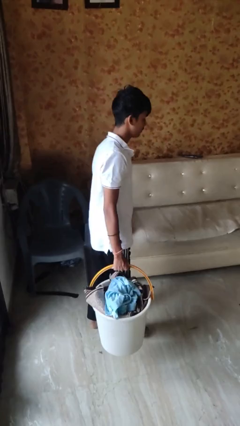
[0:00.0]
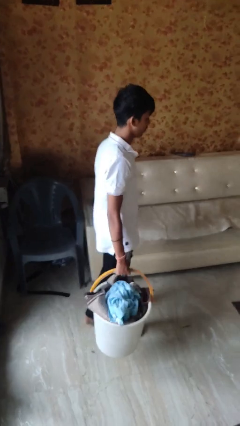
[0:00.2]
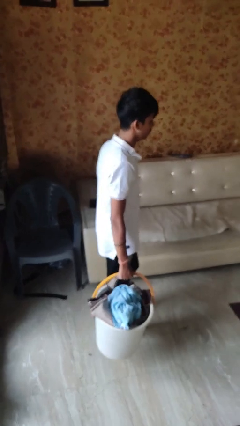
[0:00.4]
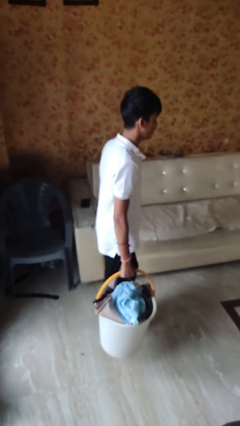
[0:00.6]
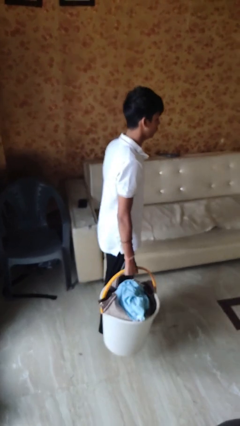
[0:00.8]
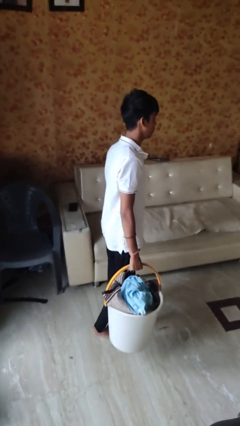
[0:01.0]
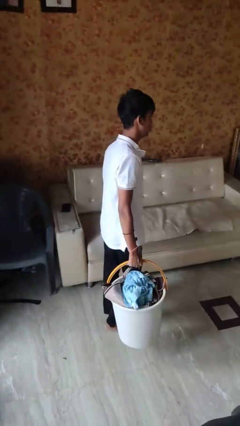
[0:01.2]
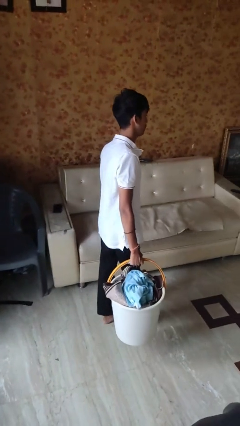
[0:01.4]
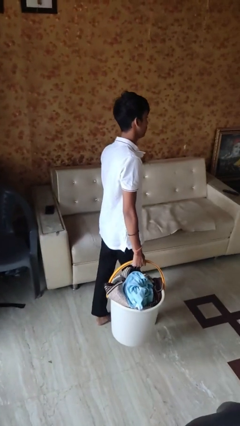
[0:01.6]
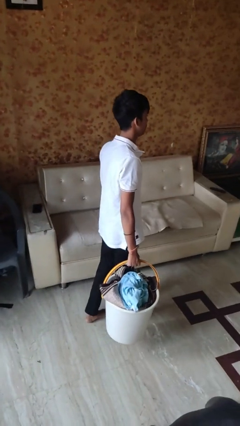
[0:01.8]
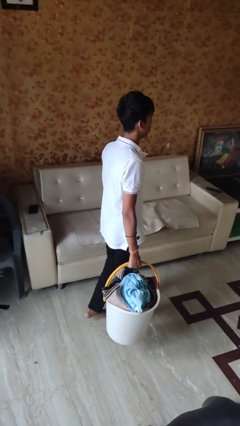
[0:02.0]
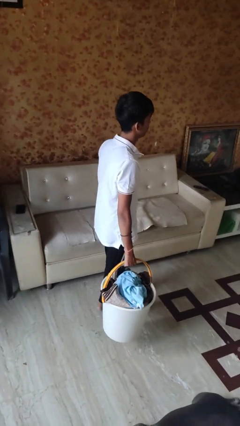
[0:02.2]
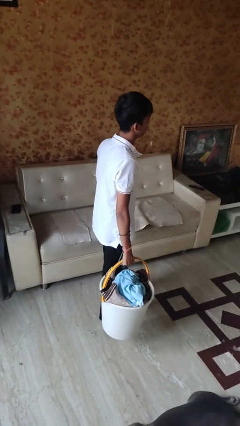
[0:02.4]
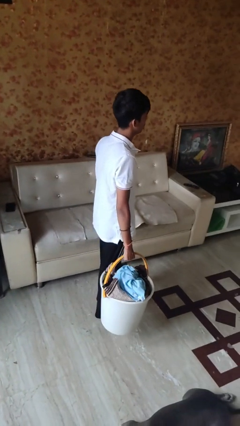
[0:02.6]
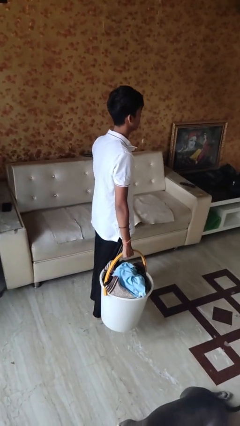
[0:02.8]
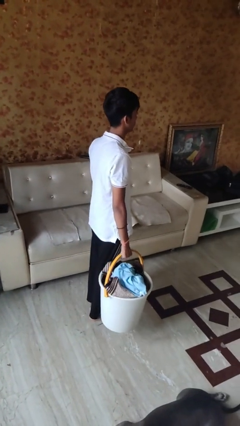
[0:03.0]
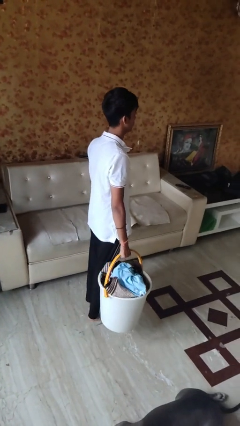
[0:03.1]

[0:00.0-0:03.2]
person carries laundry basket

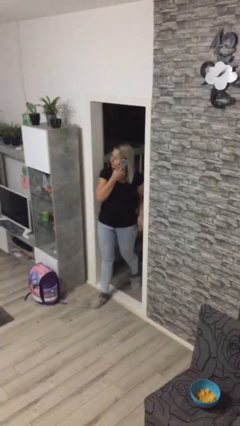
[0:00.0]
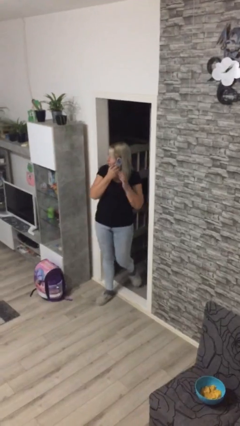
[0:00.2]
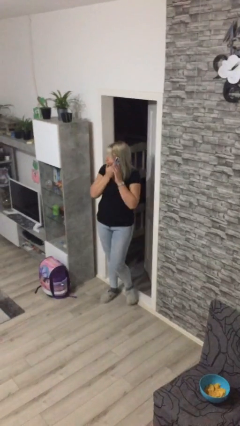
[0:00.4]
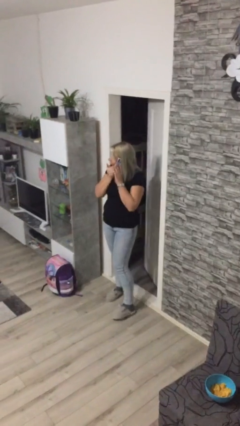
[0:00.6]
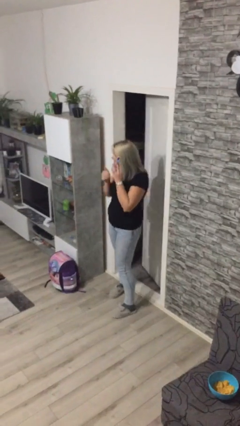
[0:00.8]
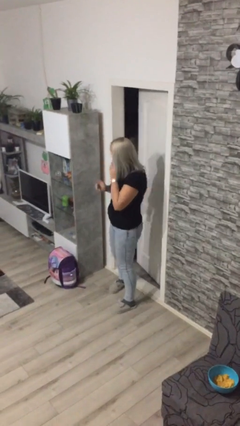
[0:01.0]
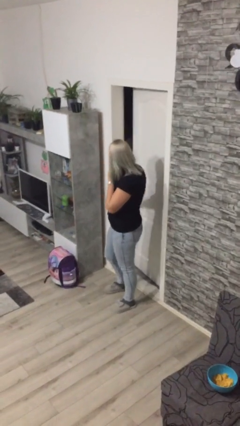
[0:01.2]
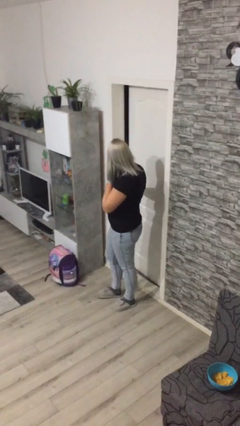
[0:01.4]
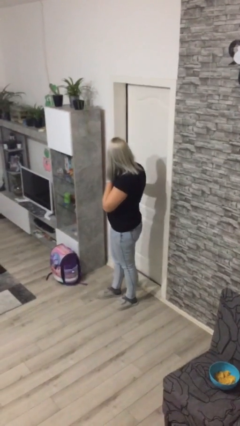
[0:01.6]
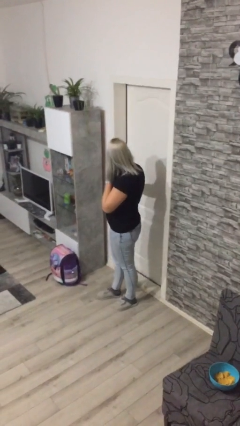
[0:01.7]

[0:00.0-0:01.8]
person enters scene through structure

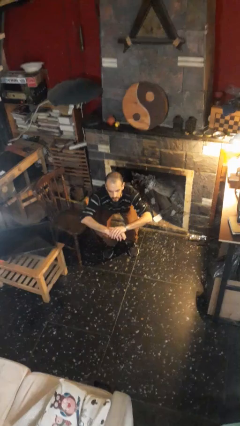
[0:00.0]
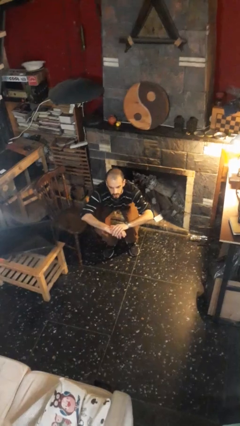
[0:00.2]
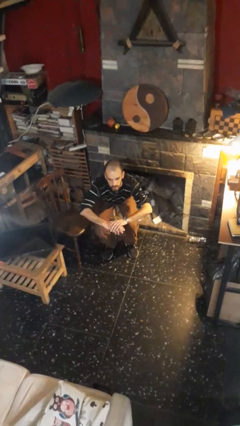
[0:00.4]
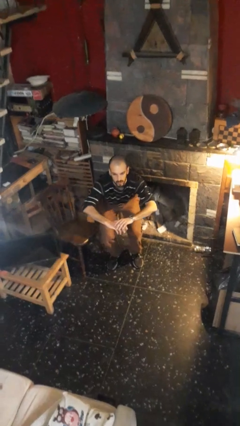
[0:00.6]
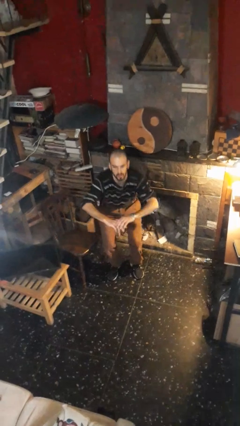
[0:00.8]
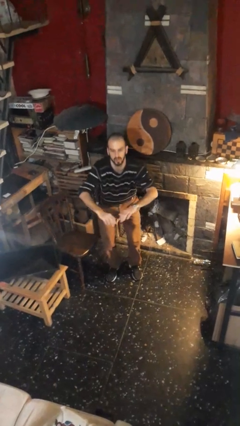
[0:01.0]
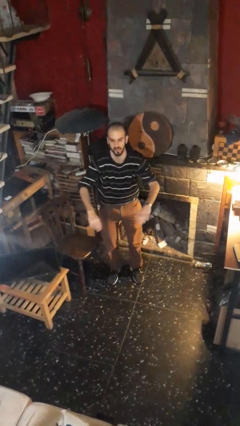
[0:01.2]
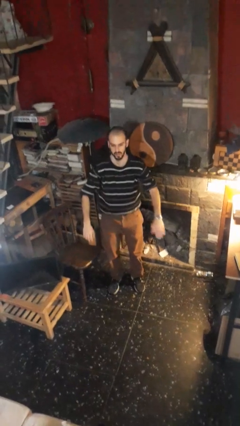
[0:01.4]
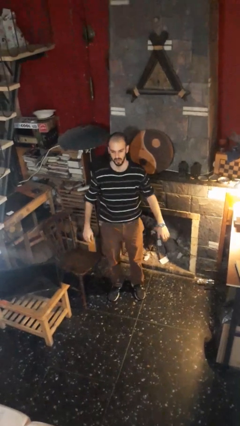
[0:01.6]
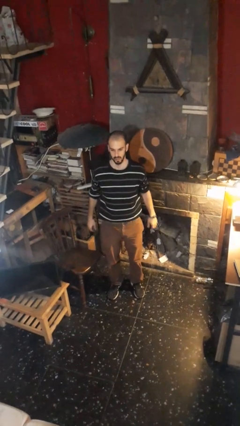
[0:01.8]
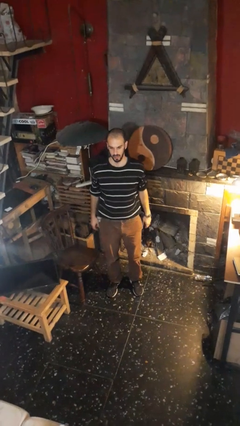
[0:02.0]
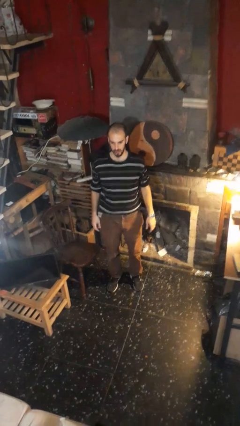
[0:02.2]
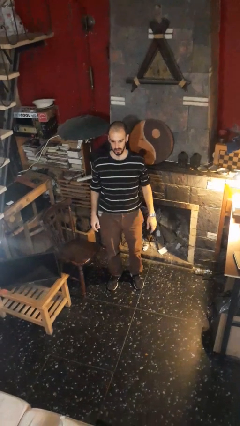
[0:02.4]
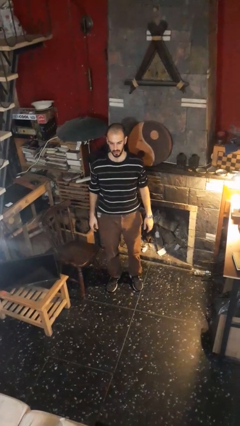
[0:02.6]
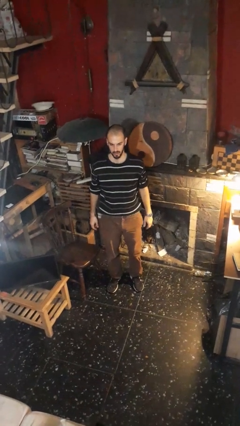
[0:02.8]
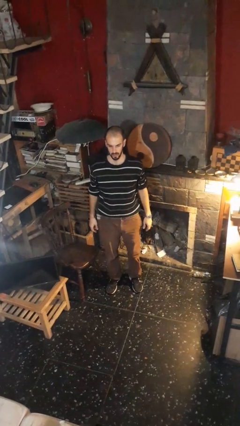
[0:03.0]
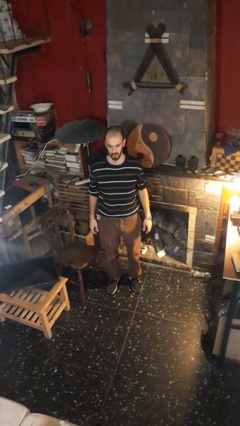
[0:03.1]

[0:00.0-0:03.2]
person stands up

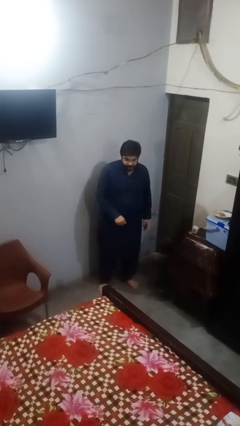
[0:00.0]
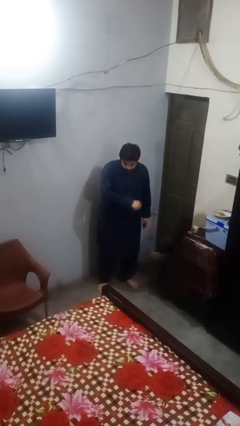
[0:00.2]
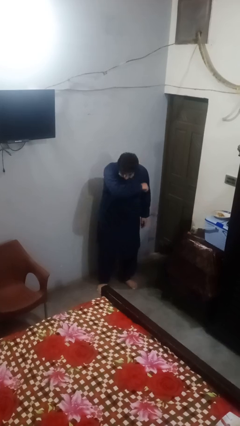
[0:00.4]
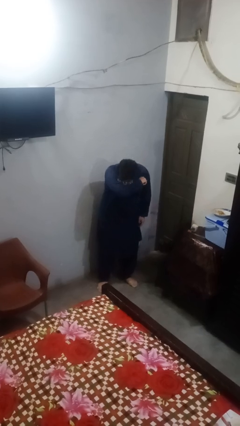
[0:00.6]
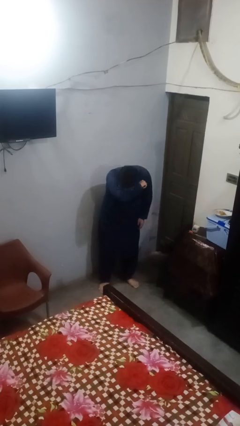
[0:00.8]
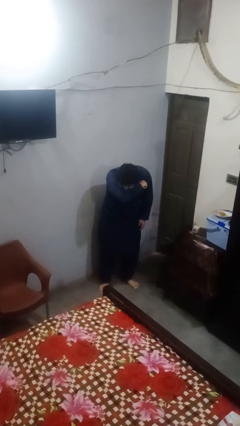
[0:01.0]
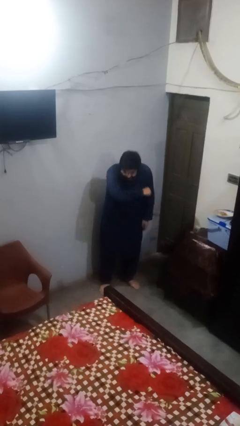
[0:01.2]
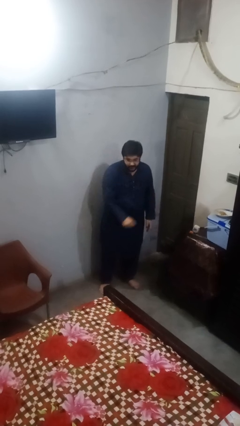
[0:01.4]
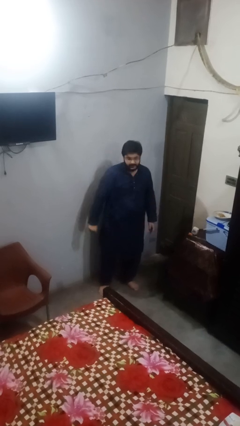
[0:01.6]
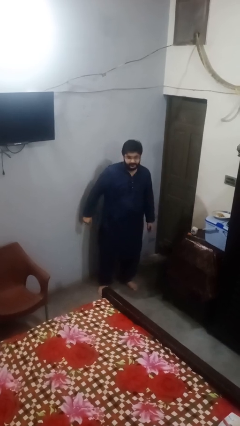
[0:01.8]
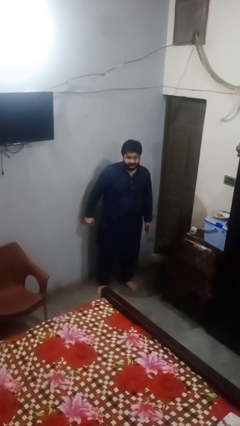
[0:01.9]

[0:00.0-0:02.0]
person sneezes into arm

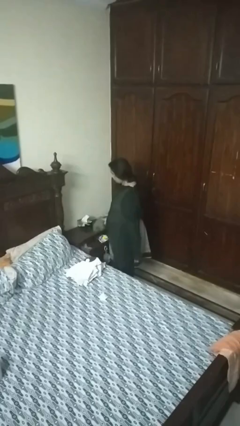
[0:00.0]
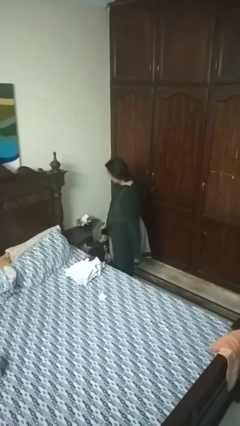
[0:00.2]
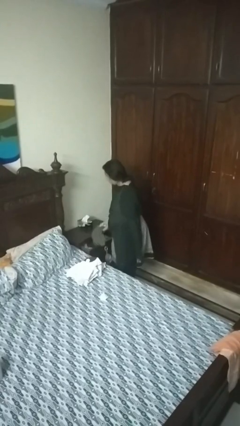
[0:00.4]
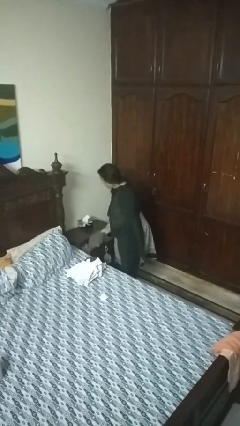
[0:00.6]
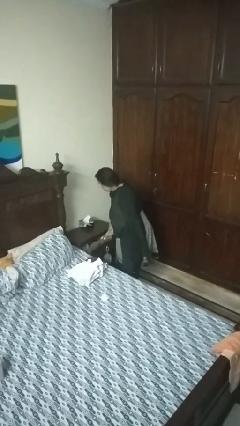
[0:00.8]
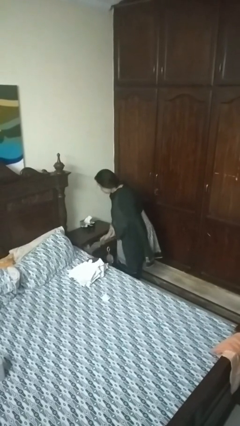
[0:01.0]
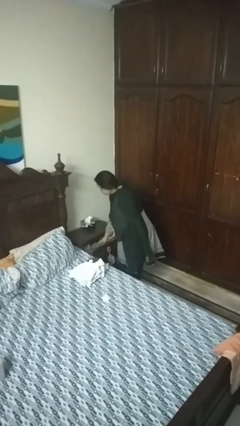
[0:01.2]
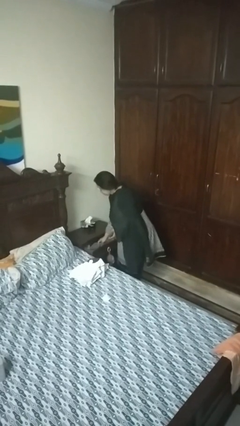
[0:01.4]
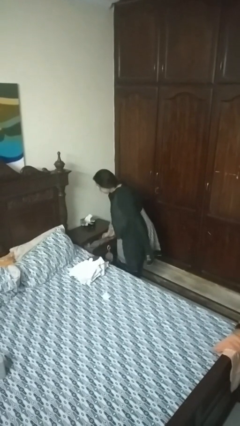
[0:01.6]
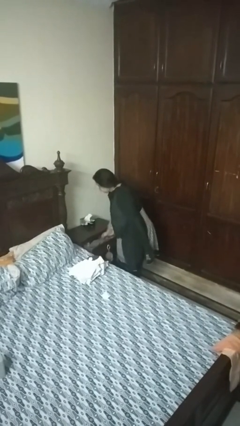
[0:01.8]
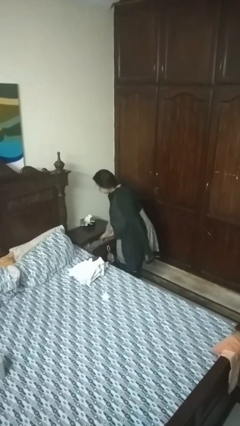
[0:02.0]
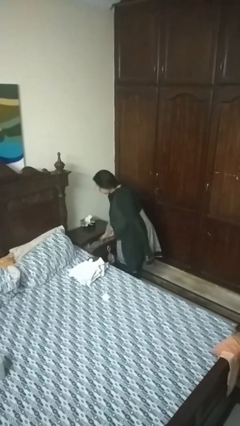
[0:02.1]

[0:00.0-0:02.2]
person puts clothes into dresser

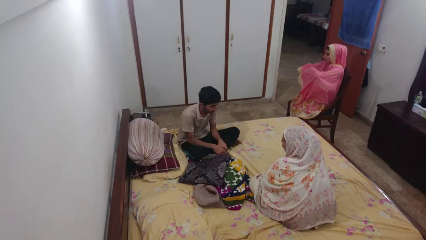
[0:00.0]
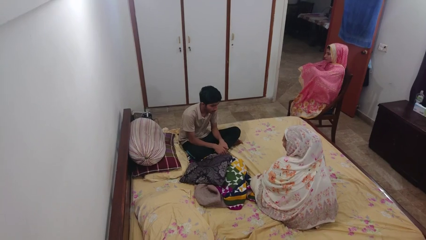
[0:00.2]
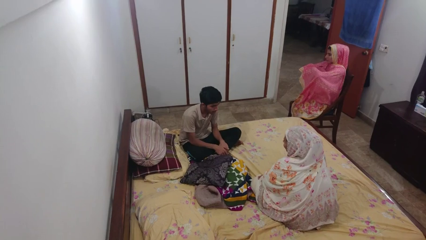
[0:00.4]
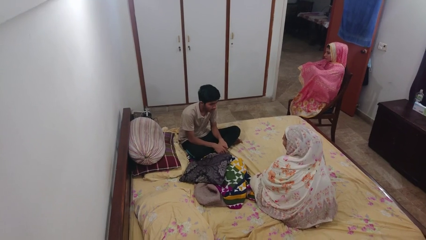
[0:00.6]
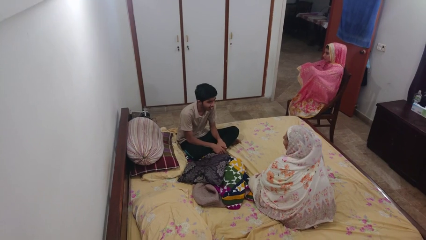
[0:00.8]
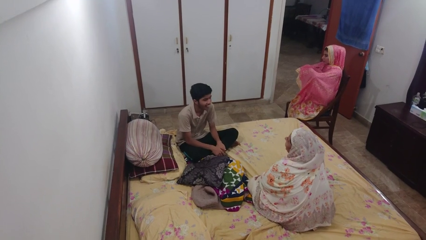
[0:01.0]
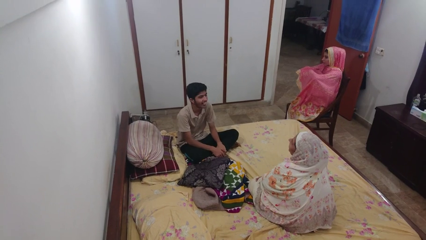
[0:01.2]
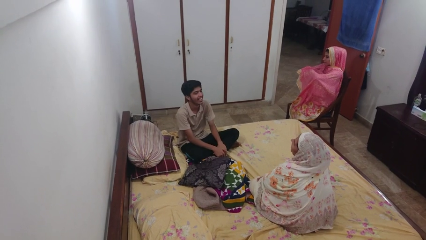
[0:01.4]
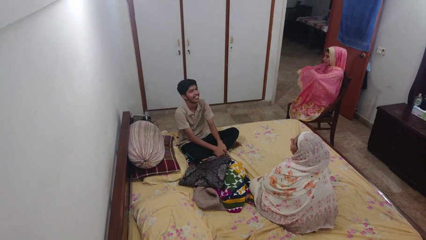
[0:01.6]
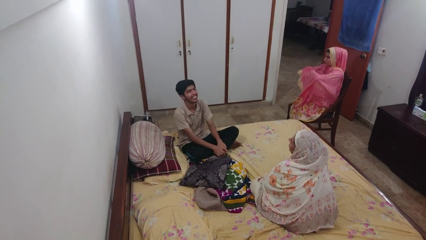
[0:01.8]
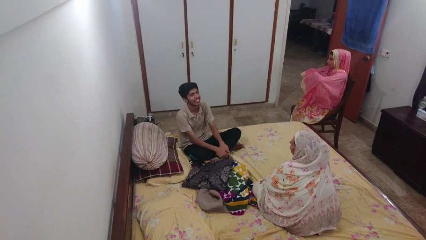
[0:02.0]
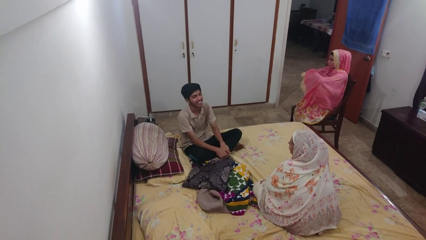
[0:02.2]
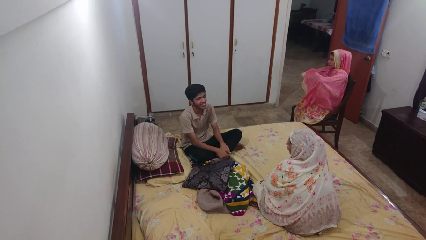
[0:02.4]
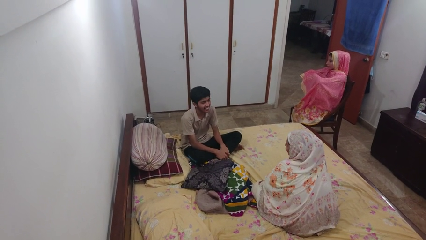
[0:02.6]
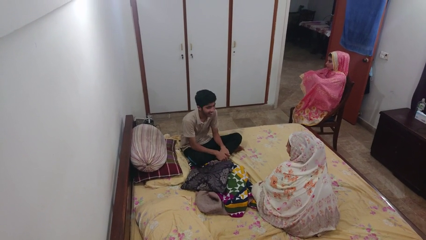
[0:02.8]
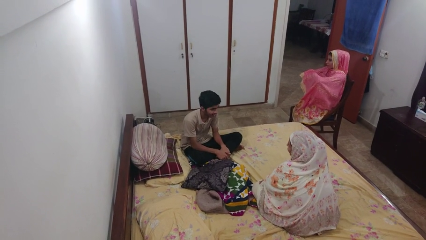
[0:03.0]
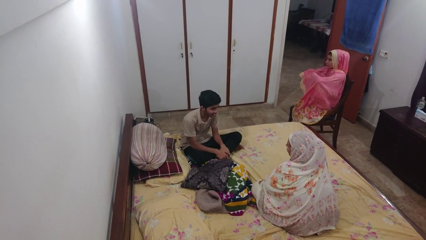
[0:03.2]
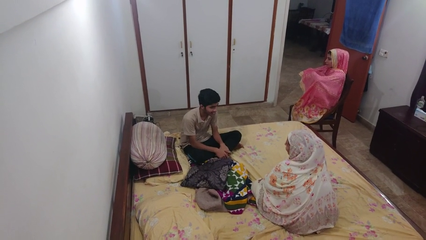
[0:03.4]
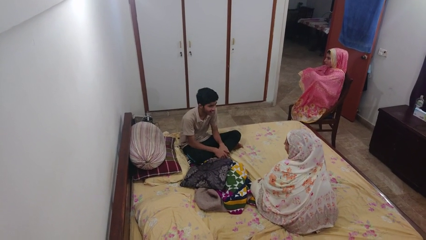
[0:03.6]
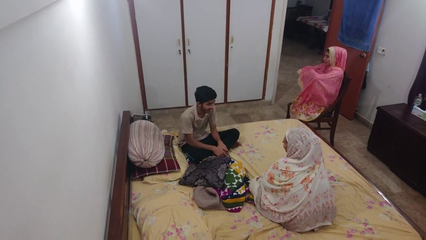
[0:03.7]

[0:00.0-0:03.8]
person laughs with person

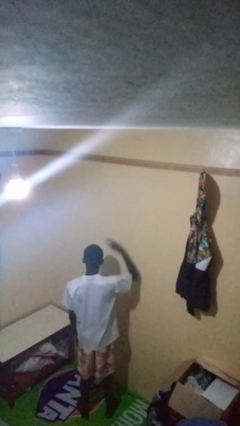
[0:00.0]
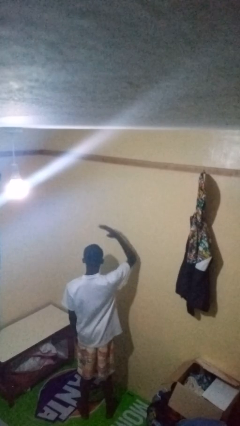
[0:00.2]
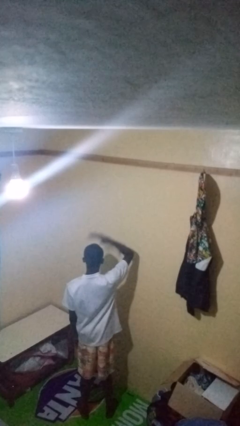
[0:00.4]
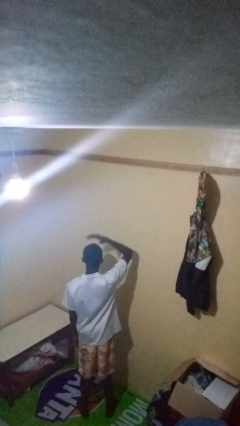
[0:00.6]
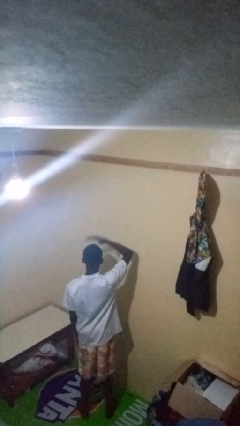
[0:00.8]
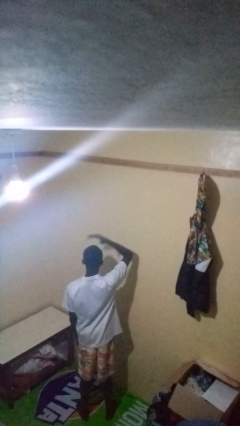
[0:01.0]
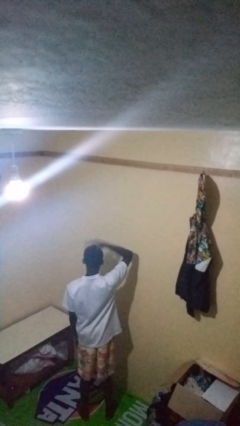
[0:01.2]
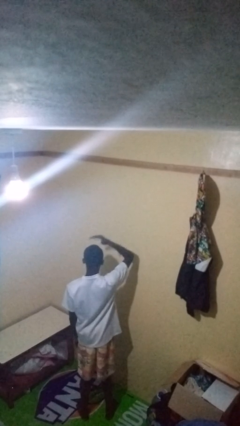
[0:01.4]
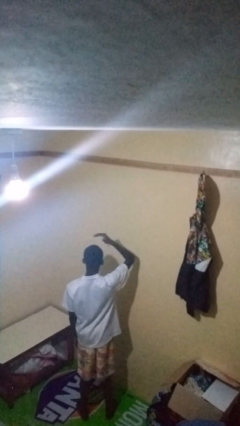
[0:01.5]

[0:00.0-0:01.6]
person pats head
